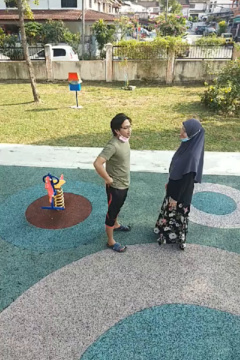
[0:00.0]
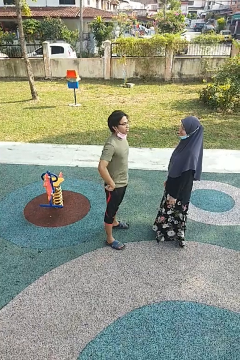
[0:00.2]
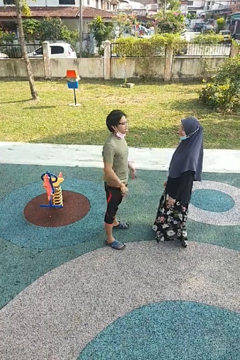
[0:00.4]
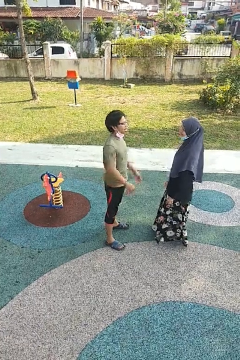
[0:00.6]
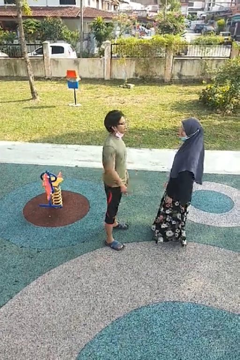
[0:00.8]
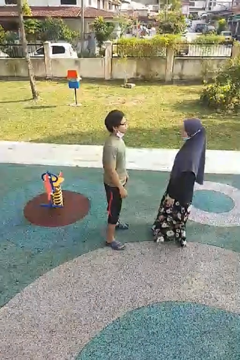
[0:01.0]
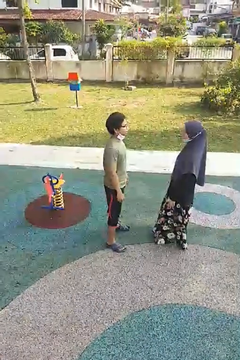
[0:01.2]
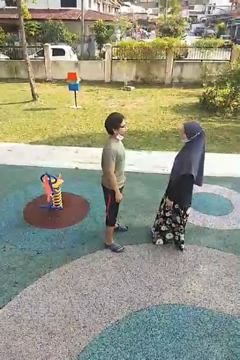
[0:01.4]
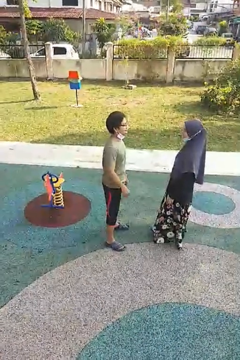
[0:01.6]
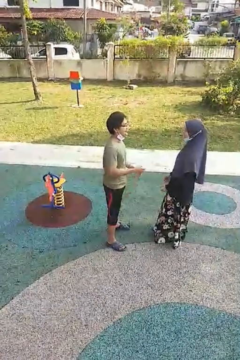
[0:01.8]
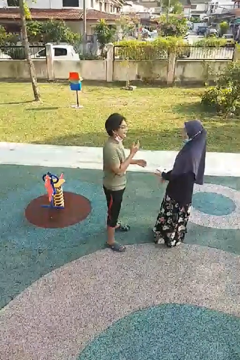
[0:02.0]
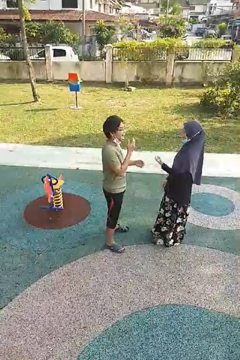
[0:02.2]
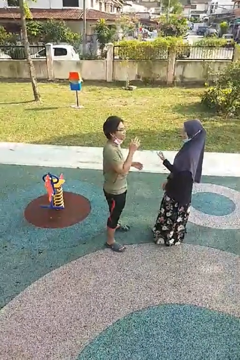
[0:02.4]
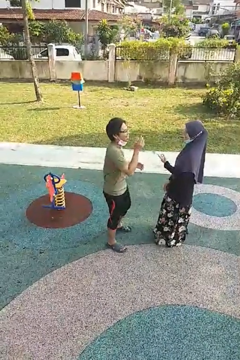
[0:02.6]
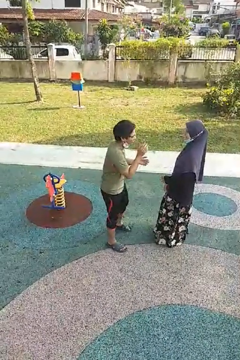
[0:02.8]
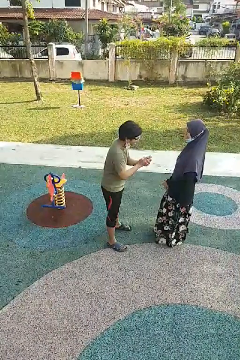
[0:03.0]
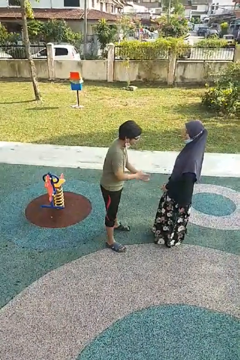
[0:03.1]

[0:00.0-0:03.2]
person laughs with person

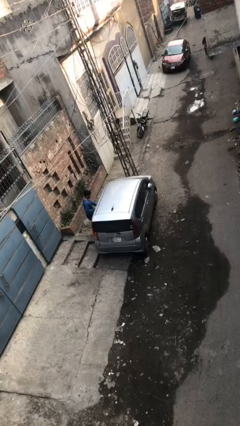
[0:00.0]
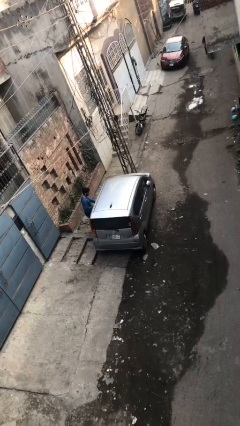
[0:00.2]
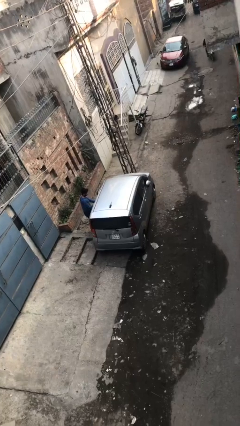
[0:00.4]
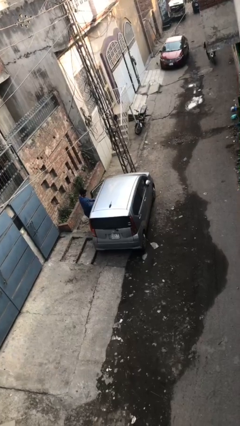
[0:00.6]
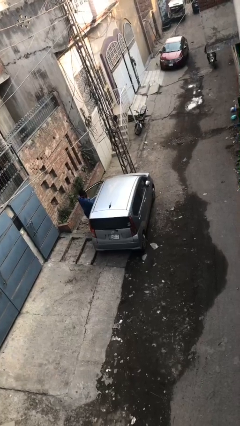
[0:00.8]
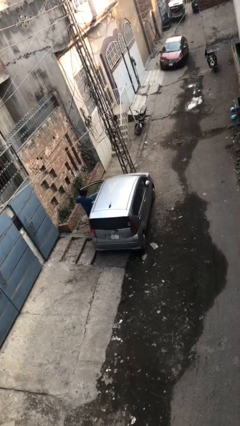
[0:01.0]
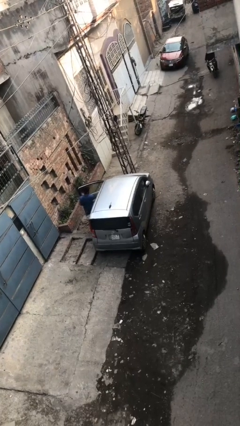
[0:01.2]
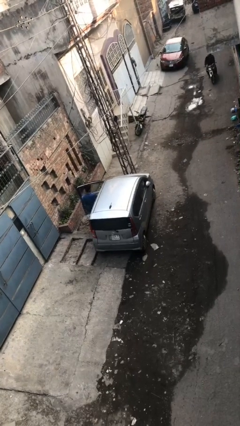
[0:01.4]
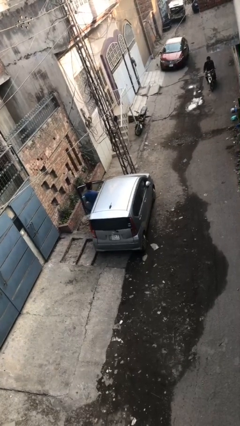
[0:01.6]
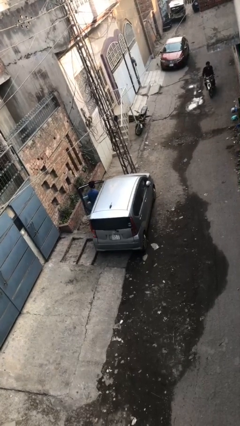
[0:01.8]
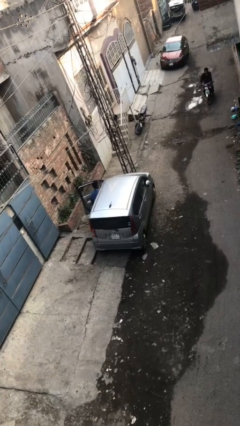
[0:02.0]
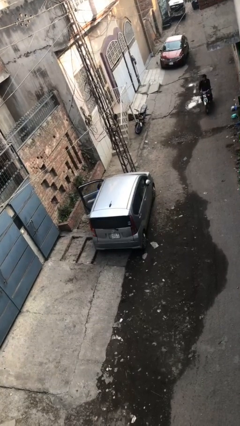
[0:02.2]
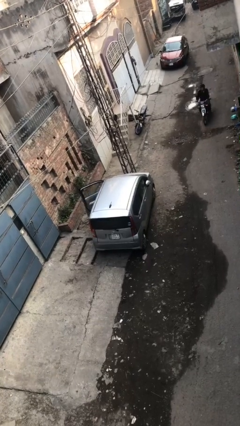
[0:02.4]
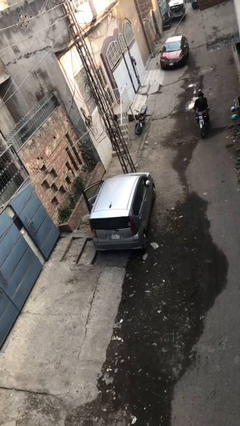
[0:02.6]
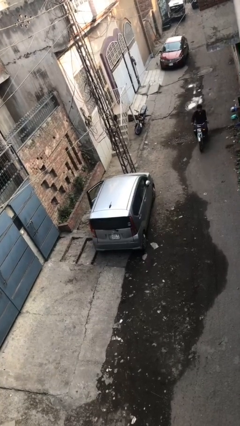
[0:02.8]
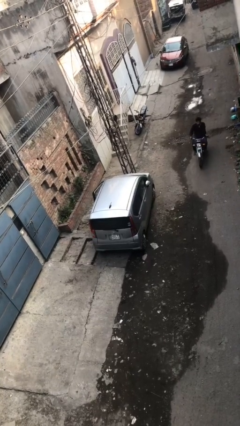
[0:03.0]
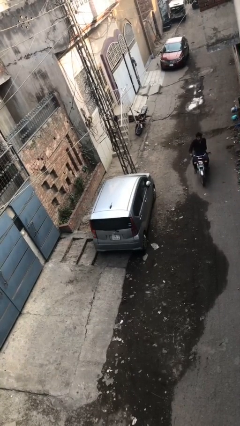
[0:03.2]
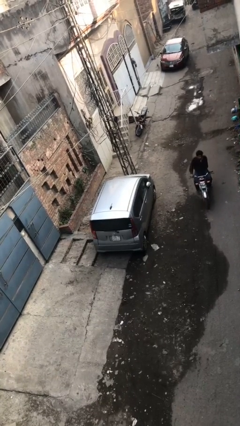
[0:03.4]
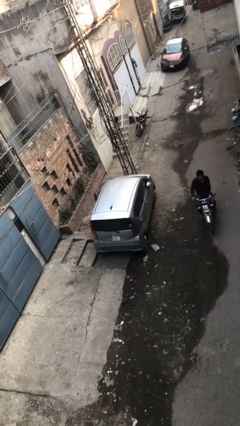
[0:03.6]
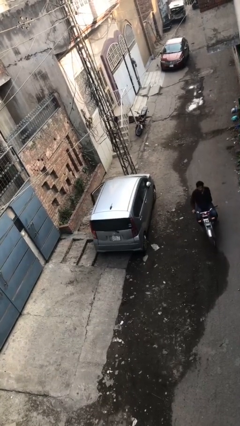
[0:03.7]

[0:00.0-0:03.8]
car picks up person

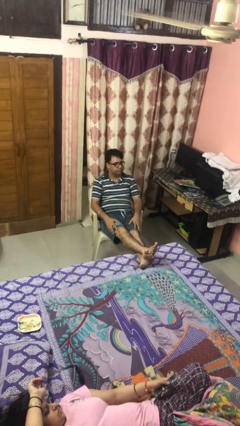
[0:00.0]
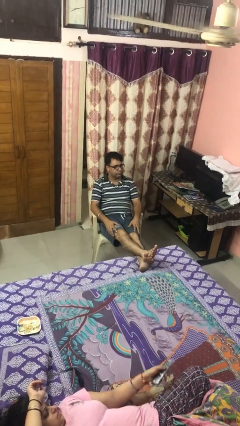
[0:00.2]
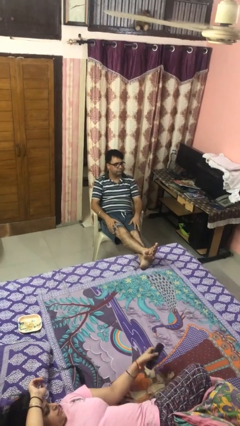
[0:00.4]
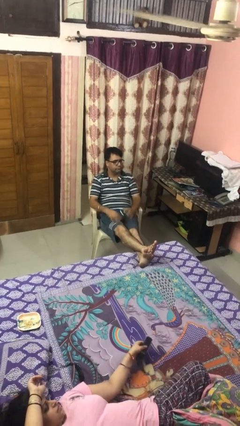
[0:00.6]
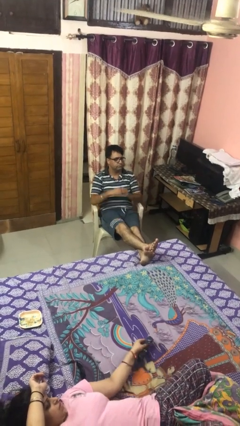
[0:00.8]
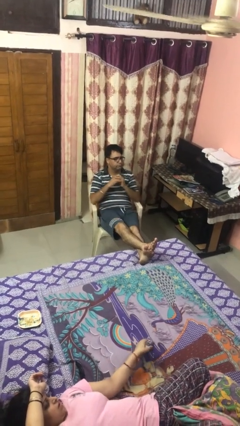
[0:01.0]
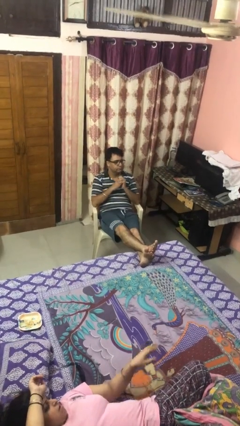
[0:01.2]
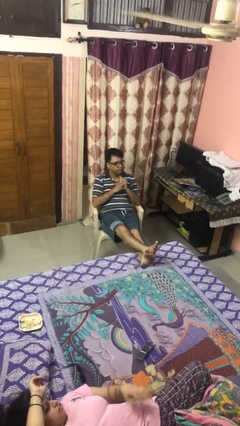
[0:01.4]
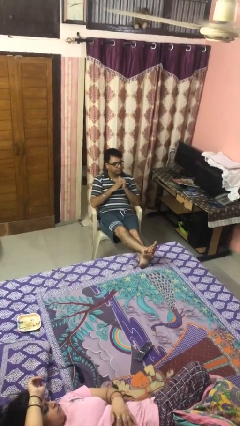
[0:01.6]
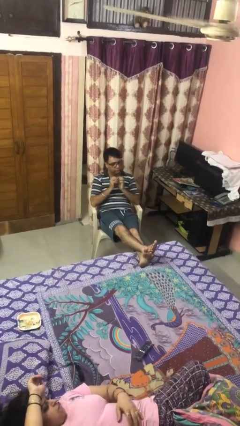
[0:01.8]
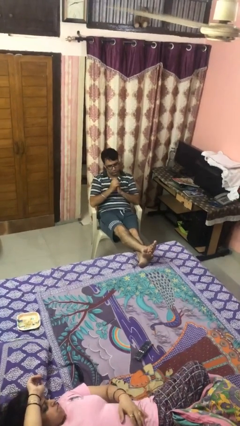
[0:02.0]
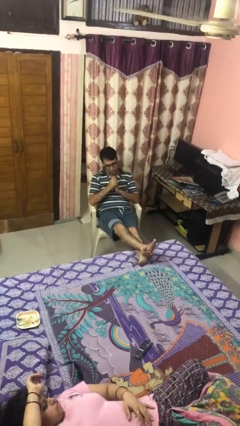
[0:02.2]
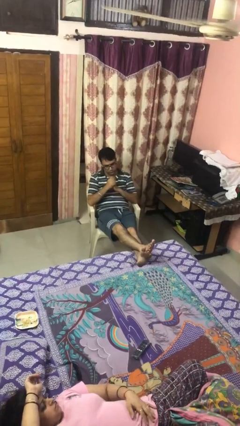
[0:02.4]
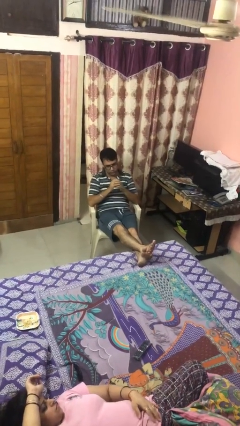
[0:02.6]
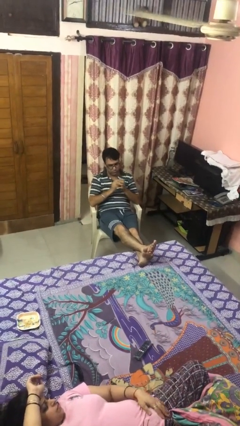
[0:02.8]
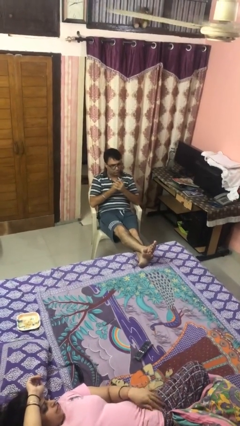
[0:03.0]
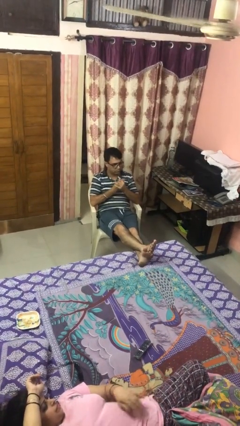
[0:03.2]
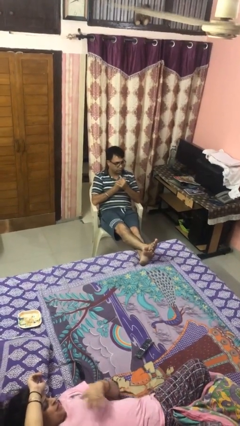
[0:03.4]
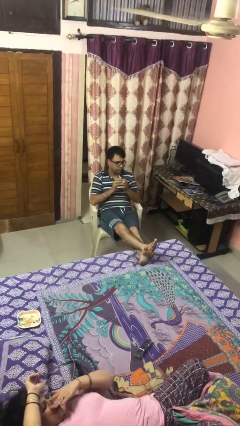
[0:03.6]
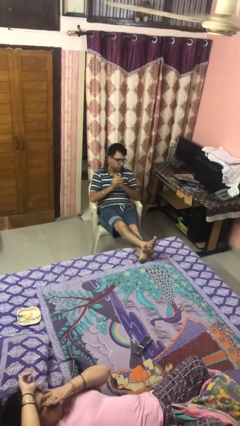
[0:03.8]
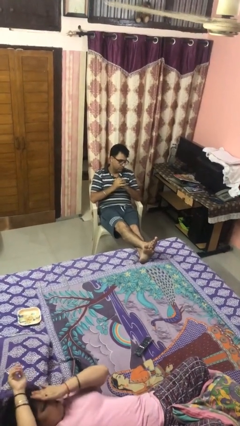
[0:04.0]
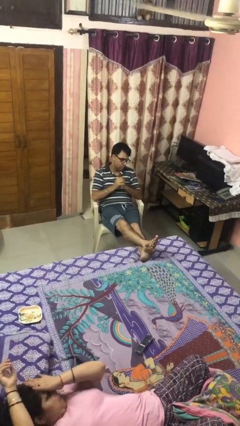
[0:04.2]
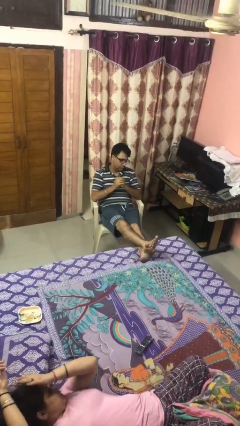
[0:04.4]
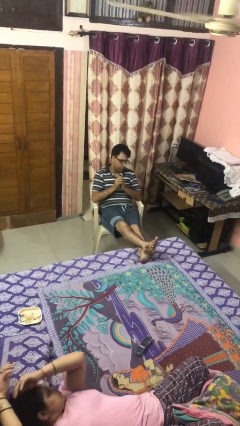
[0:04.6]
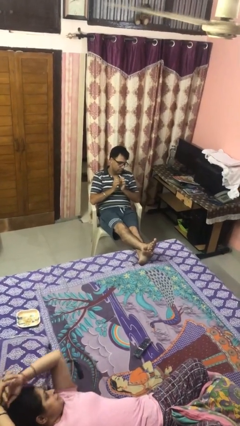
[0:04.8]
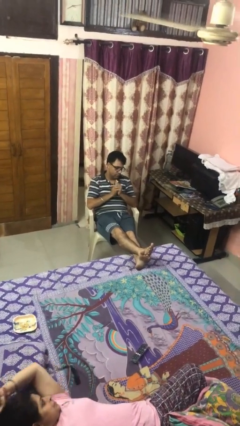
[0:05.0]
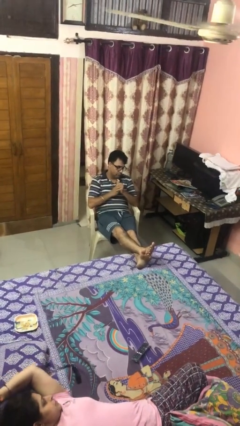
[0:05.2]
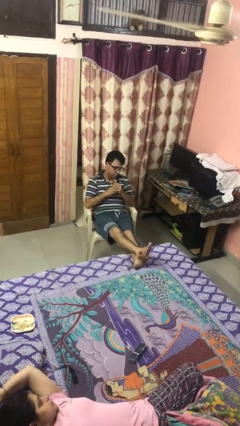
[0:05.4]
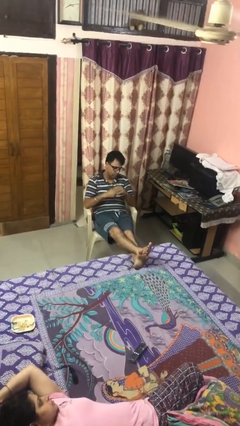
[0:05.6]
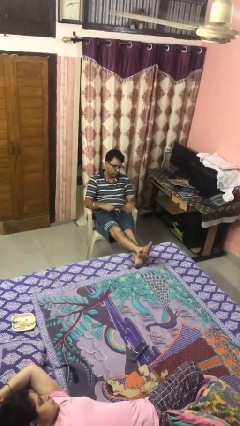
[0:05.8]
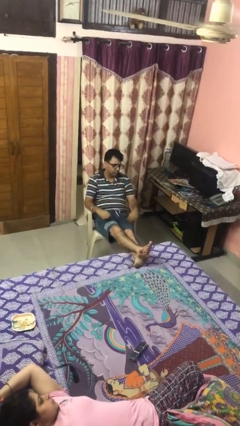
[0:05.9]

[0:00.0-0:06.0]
person cracks knuckles

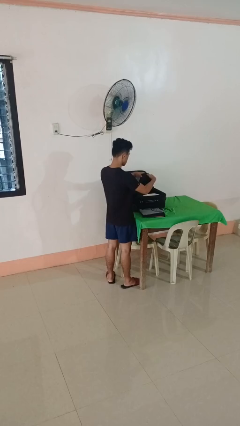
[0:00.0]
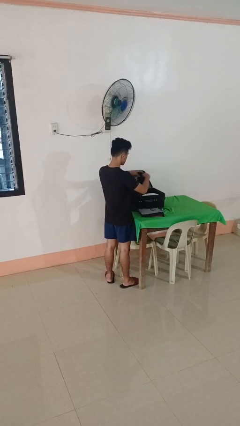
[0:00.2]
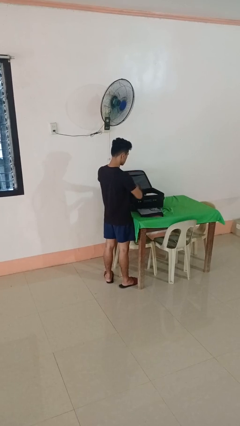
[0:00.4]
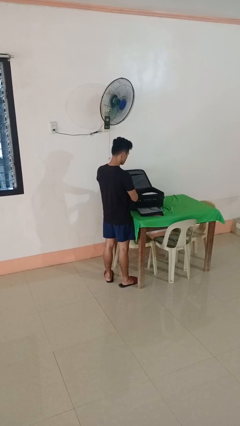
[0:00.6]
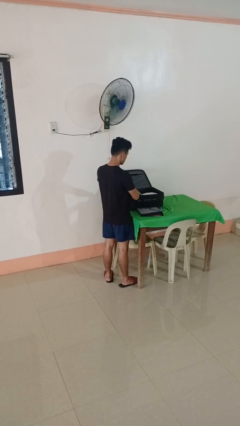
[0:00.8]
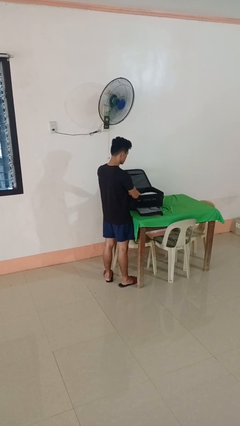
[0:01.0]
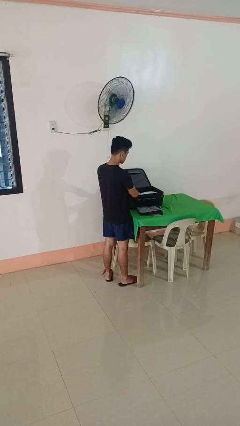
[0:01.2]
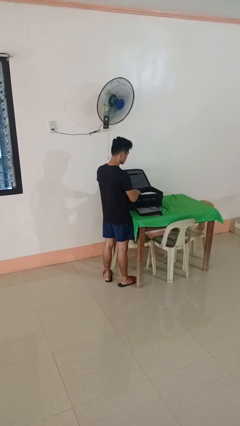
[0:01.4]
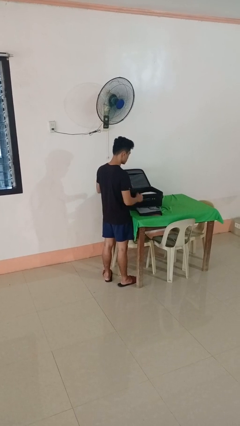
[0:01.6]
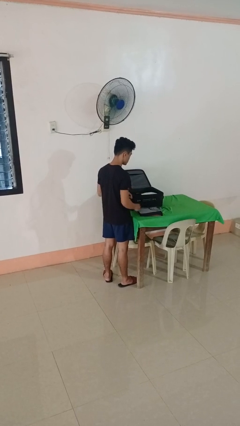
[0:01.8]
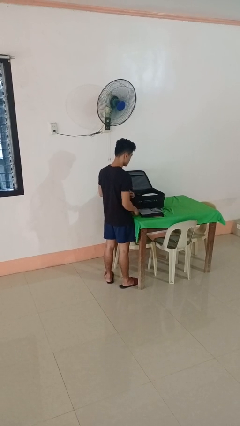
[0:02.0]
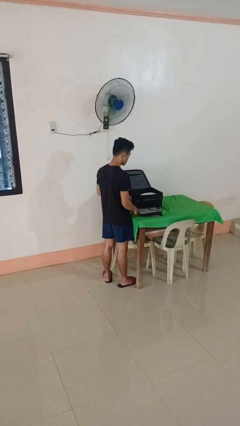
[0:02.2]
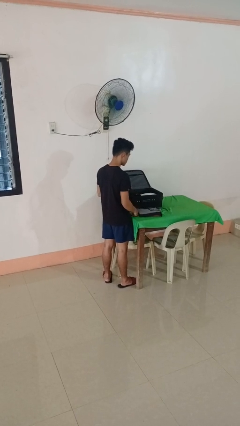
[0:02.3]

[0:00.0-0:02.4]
person loads clothes into suitcase

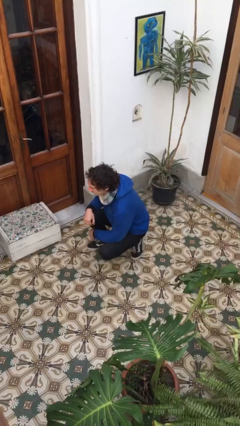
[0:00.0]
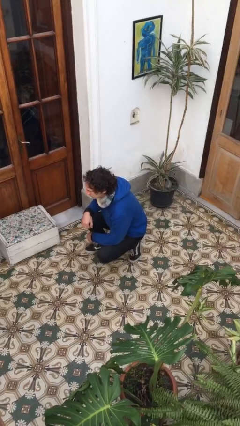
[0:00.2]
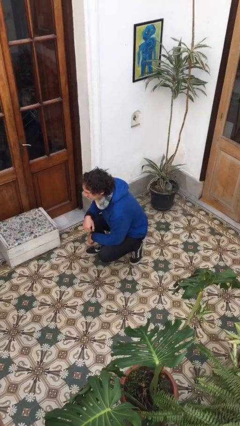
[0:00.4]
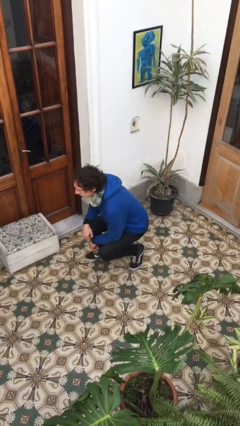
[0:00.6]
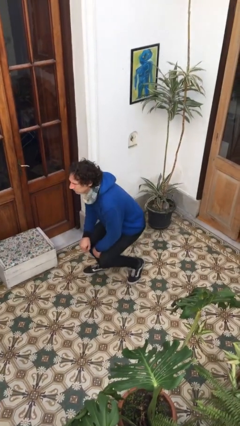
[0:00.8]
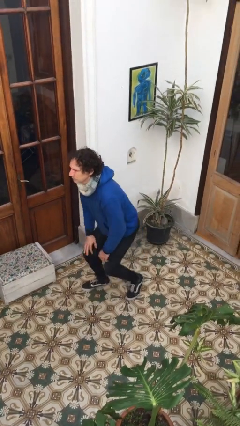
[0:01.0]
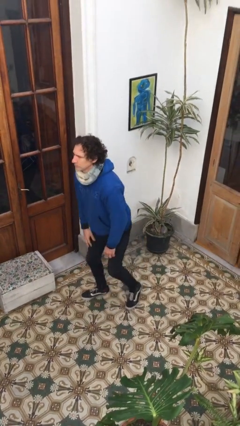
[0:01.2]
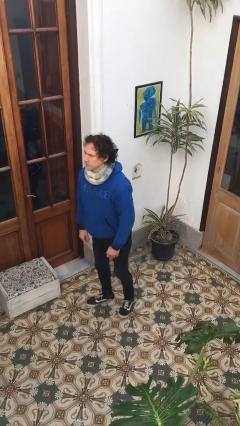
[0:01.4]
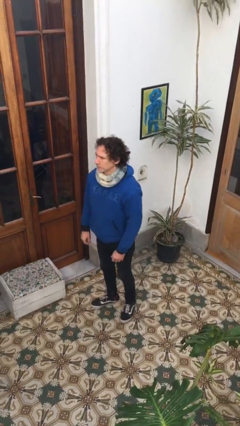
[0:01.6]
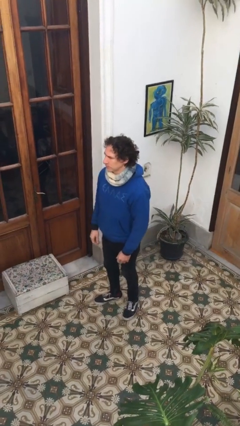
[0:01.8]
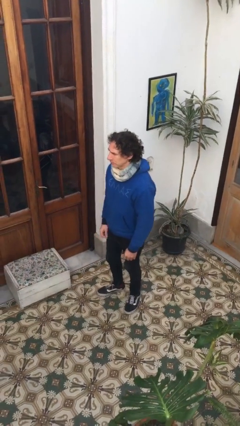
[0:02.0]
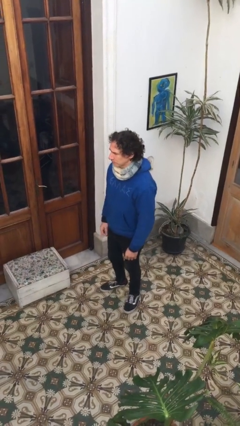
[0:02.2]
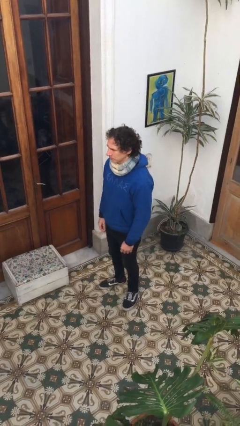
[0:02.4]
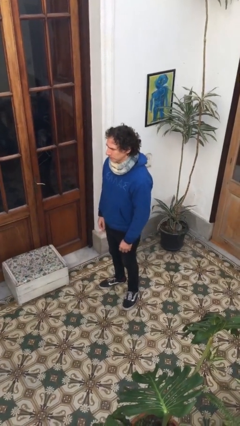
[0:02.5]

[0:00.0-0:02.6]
person stands up

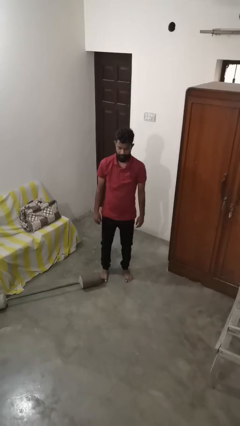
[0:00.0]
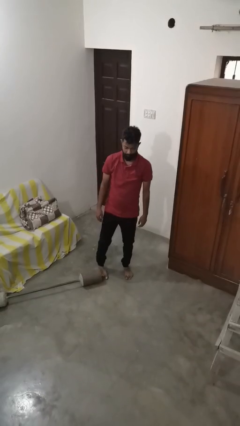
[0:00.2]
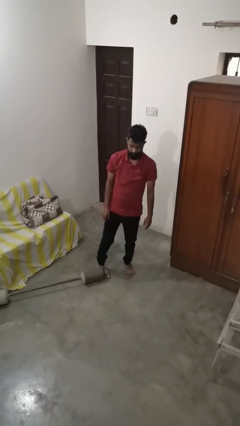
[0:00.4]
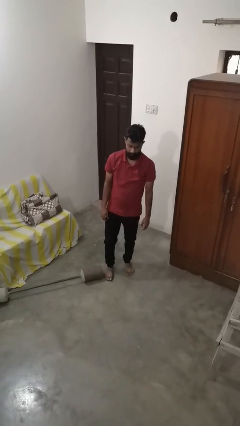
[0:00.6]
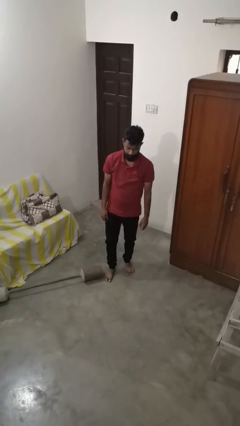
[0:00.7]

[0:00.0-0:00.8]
person trips on object on floor
